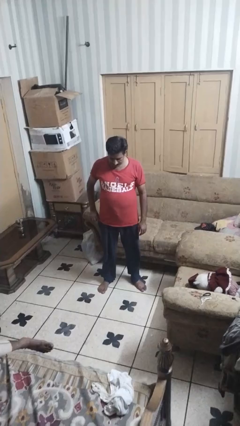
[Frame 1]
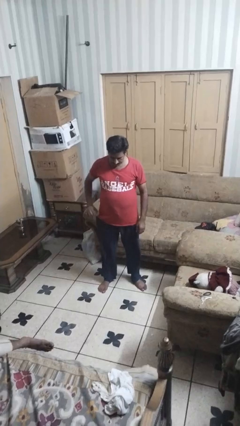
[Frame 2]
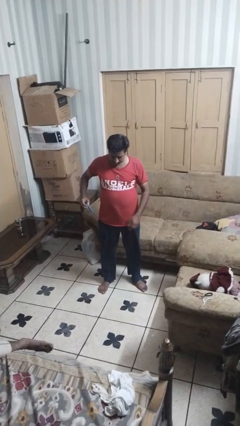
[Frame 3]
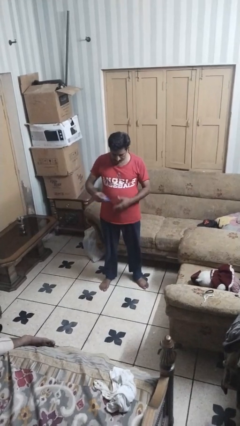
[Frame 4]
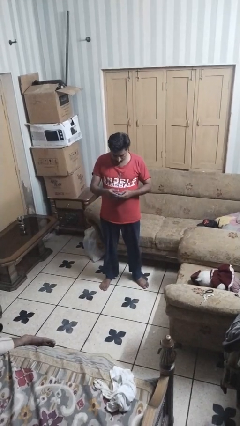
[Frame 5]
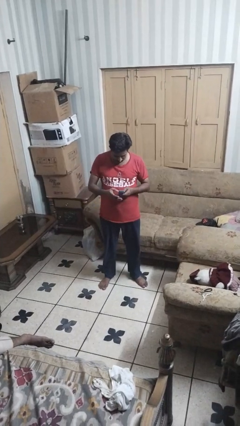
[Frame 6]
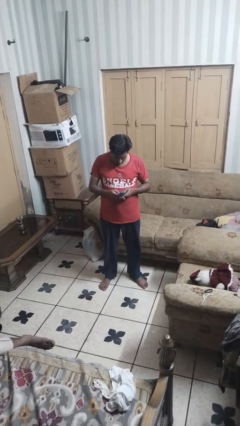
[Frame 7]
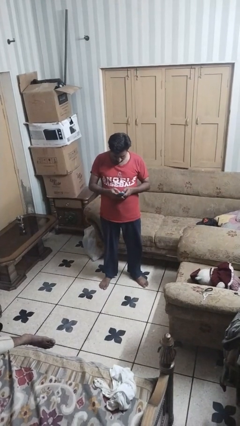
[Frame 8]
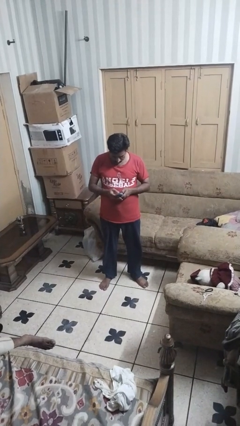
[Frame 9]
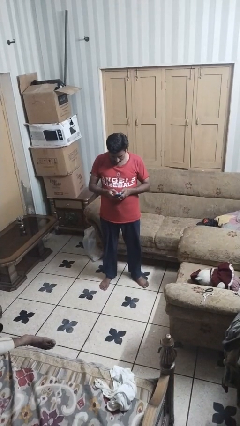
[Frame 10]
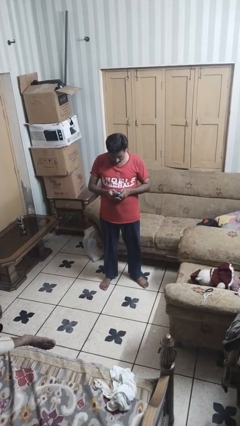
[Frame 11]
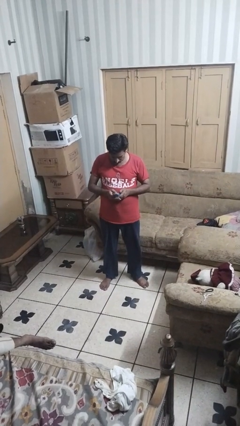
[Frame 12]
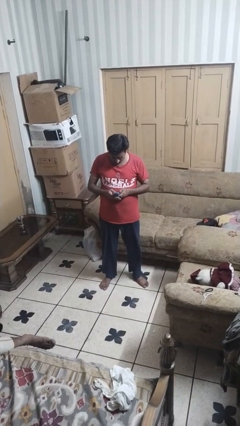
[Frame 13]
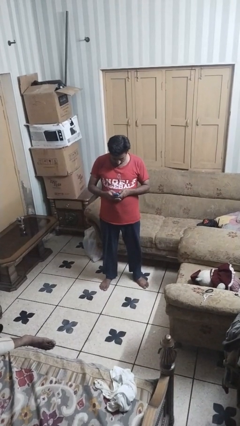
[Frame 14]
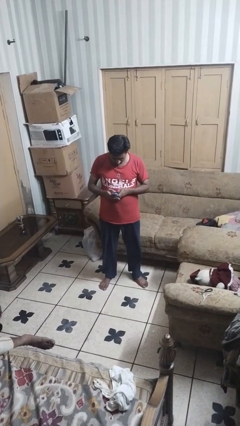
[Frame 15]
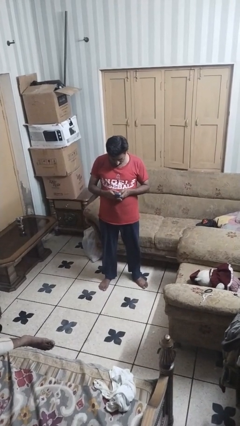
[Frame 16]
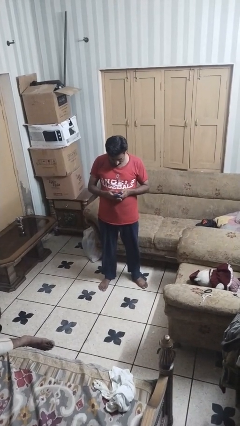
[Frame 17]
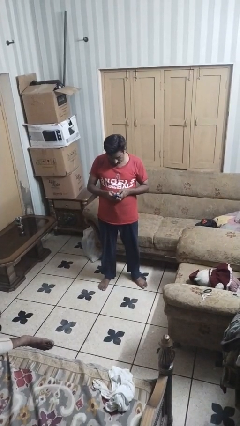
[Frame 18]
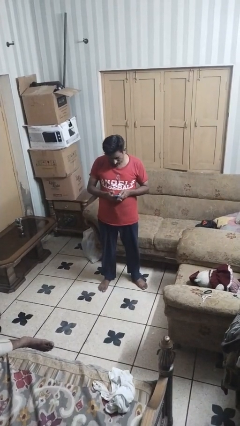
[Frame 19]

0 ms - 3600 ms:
person takes phone from pocket

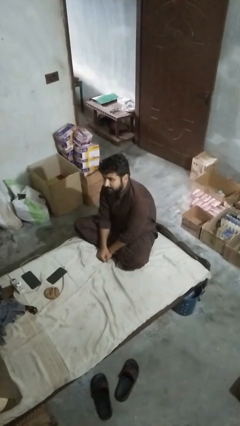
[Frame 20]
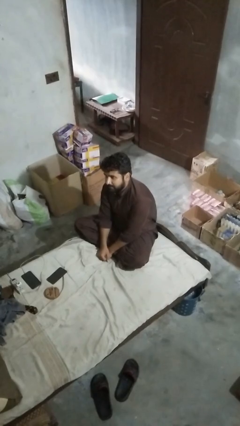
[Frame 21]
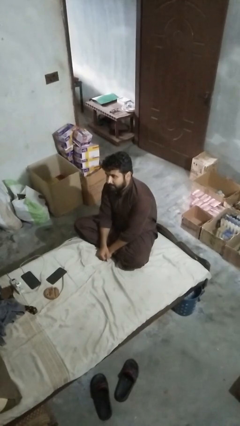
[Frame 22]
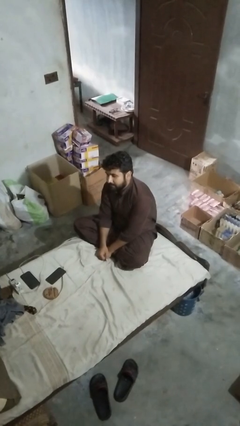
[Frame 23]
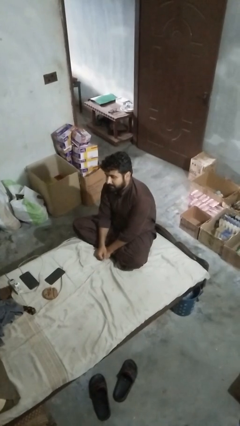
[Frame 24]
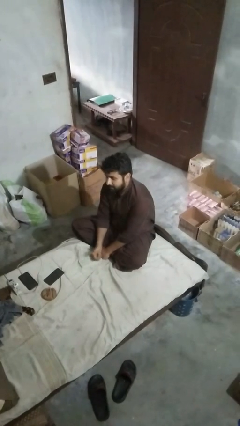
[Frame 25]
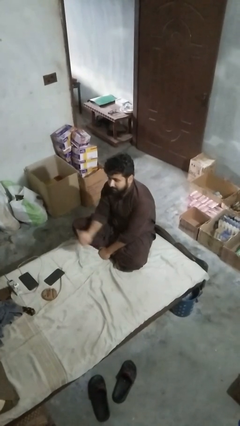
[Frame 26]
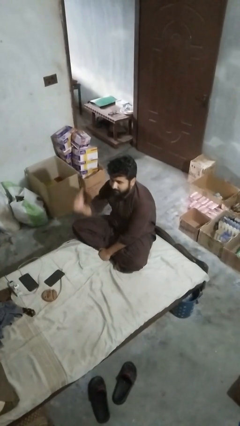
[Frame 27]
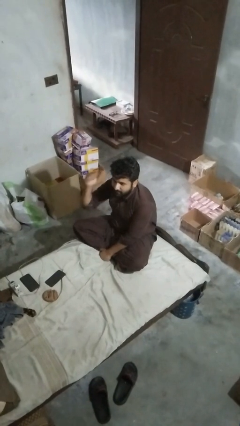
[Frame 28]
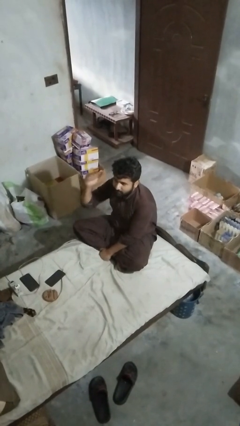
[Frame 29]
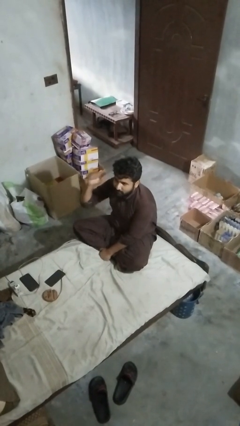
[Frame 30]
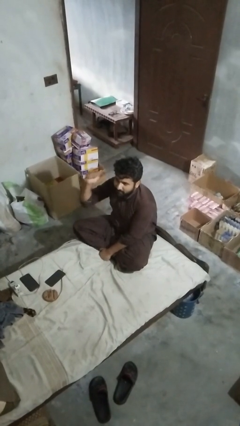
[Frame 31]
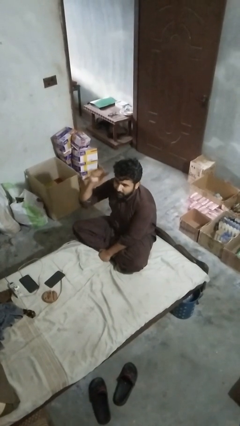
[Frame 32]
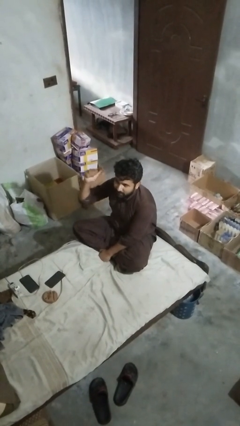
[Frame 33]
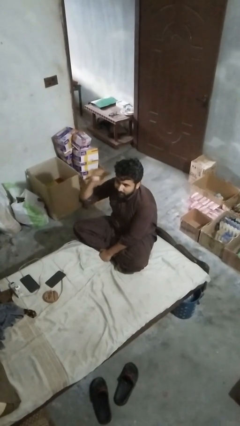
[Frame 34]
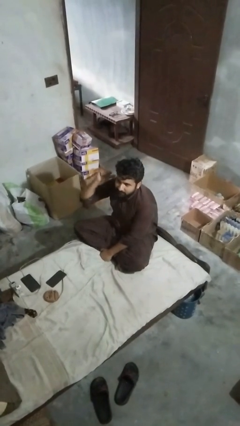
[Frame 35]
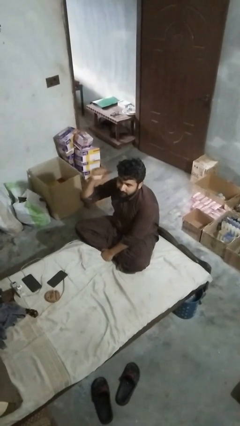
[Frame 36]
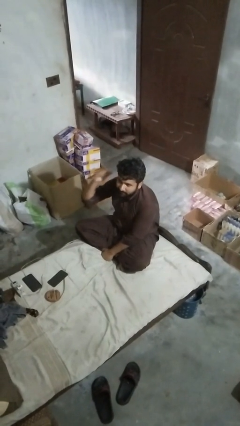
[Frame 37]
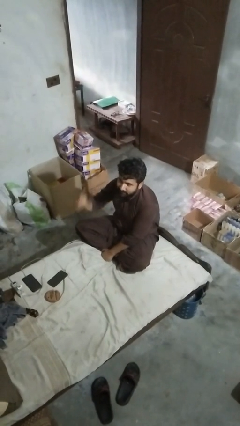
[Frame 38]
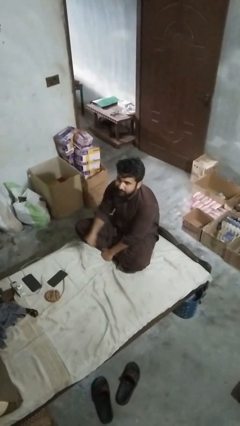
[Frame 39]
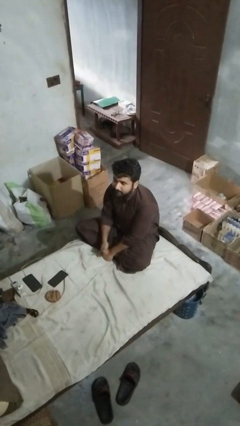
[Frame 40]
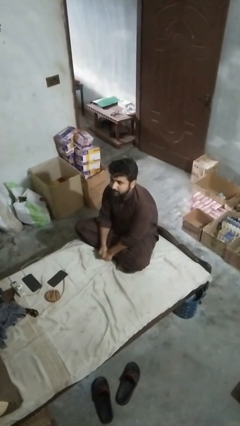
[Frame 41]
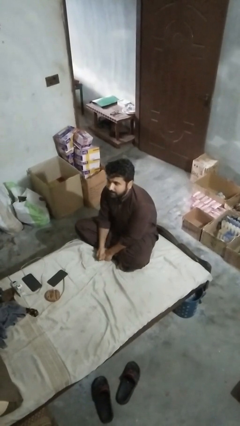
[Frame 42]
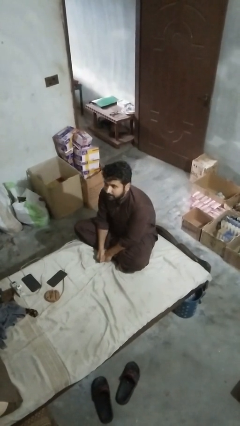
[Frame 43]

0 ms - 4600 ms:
person gestures behind me

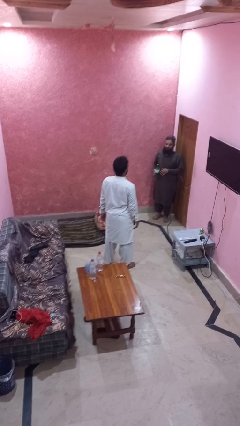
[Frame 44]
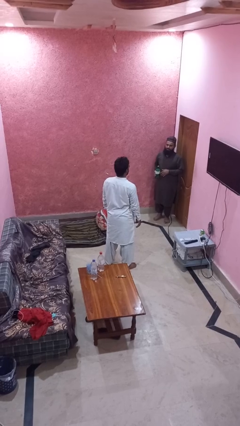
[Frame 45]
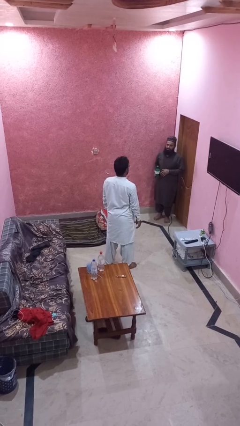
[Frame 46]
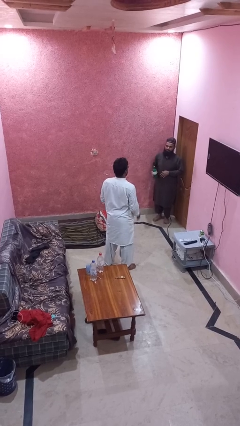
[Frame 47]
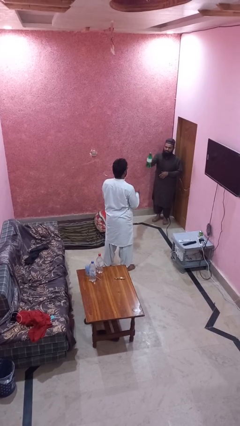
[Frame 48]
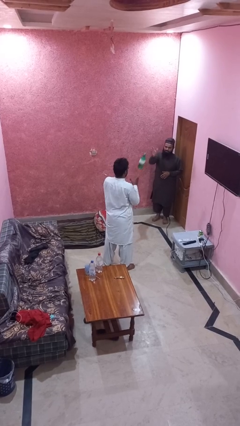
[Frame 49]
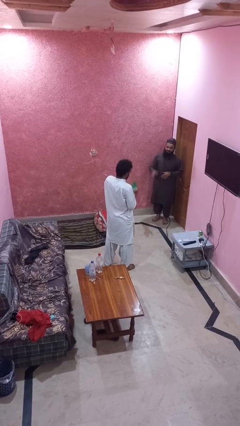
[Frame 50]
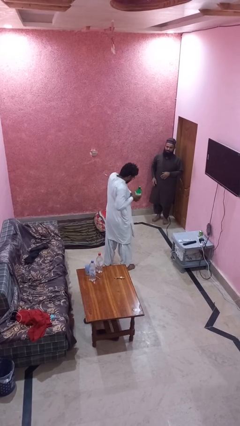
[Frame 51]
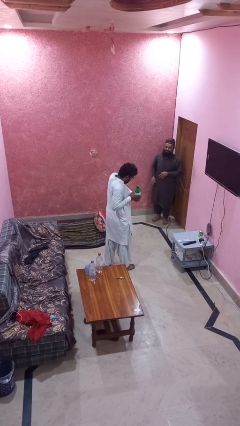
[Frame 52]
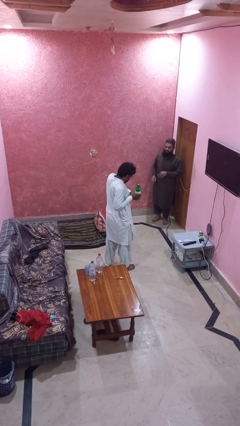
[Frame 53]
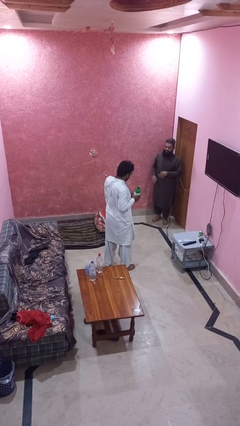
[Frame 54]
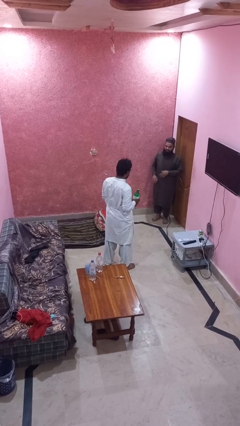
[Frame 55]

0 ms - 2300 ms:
person catches object from person

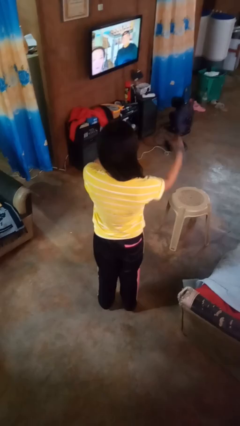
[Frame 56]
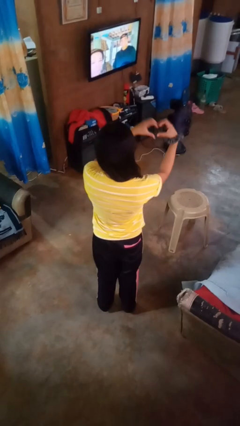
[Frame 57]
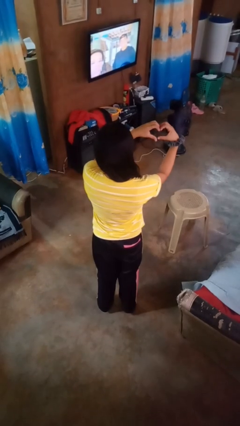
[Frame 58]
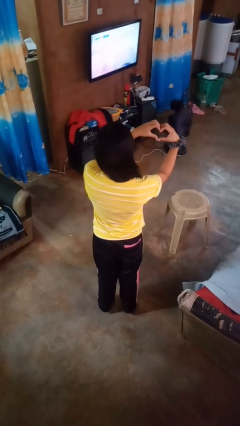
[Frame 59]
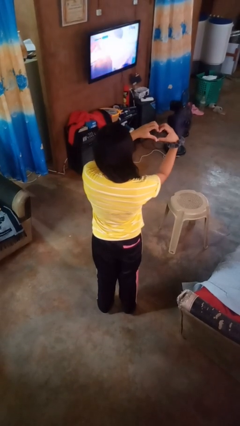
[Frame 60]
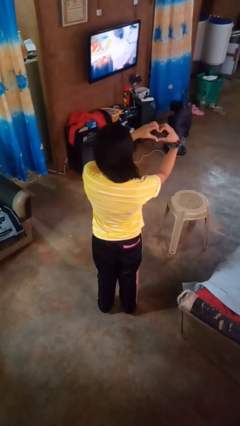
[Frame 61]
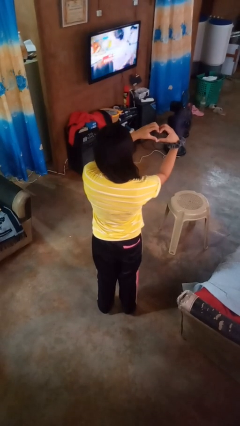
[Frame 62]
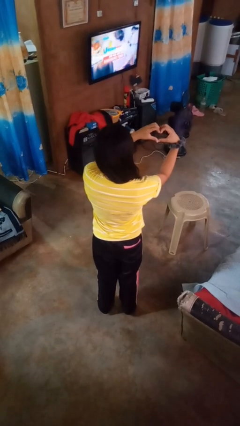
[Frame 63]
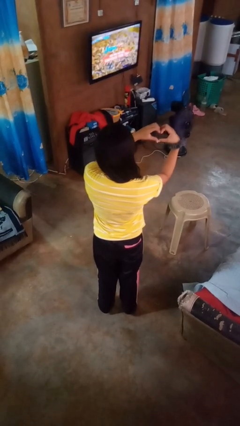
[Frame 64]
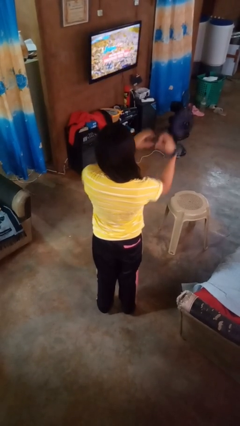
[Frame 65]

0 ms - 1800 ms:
person gestures heart

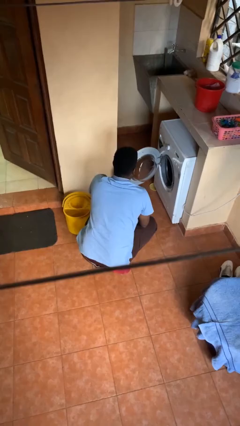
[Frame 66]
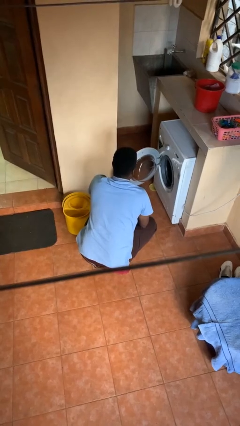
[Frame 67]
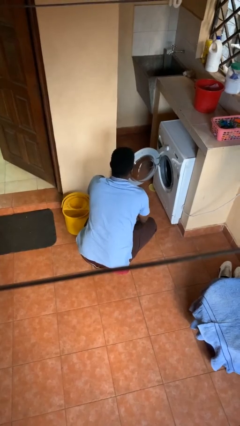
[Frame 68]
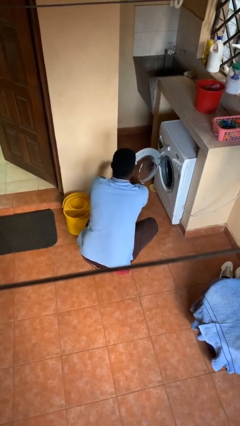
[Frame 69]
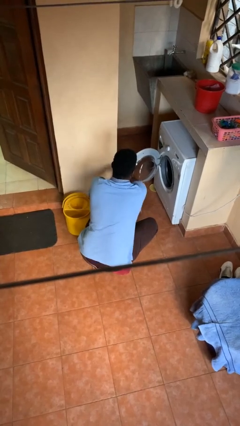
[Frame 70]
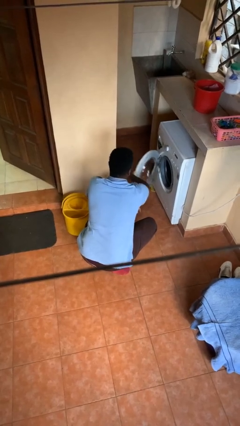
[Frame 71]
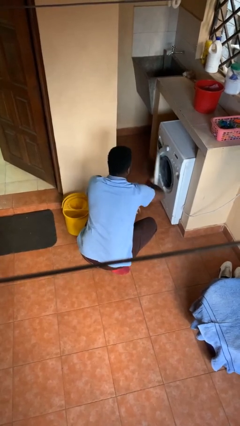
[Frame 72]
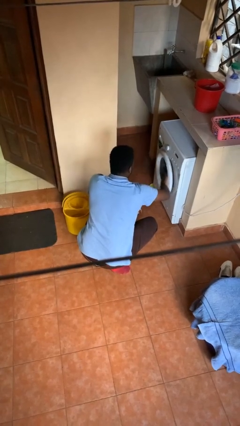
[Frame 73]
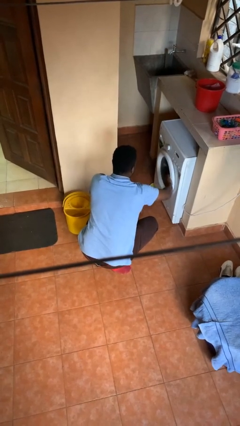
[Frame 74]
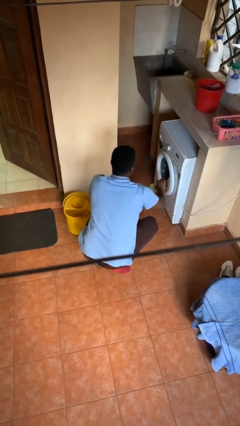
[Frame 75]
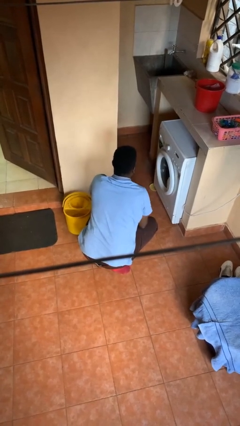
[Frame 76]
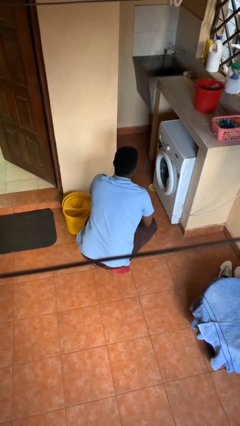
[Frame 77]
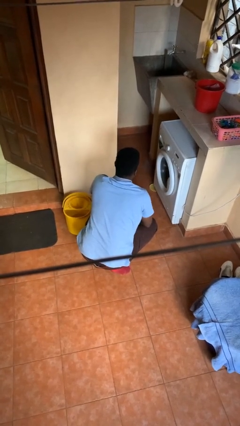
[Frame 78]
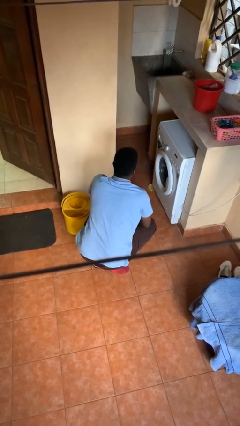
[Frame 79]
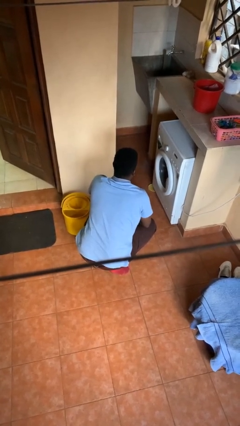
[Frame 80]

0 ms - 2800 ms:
person closes clothes washer

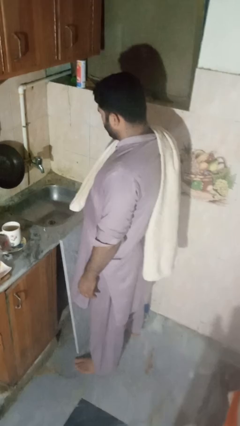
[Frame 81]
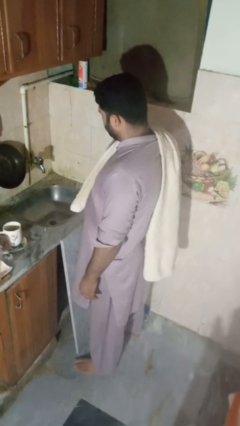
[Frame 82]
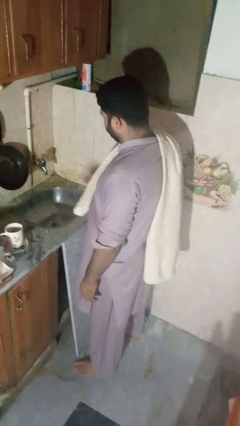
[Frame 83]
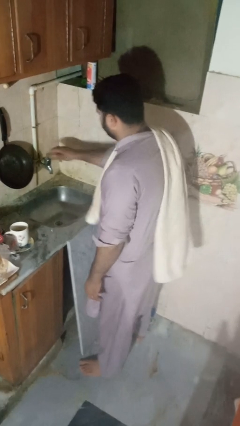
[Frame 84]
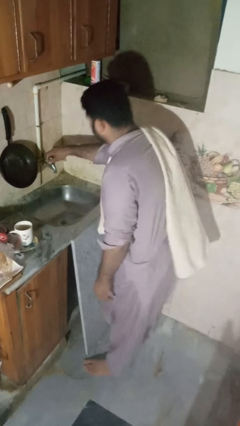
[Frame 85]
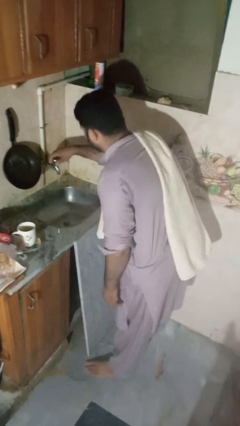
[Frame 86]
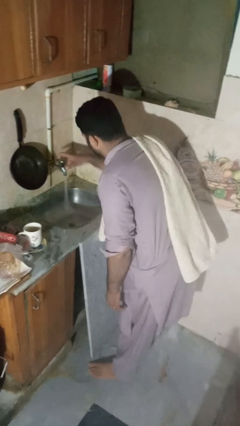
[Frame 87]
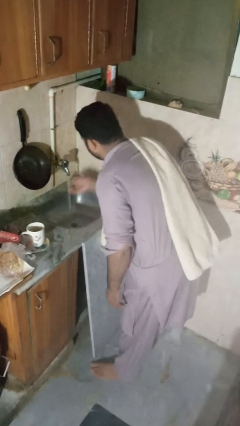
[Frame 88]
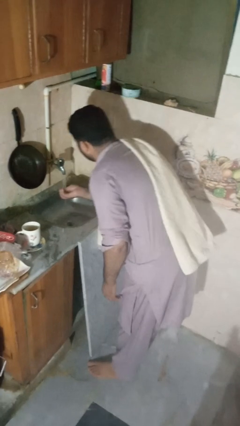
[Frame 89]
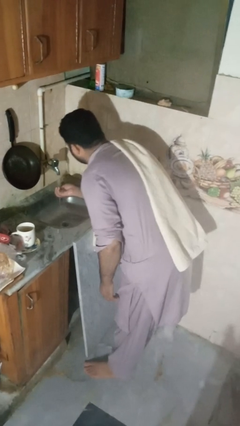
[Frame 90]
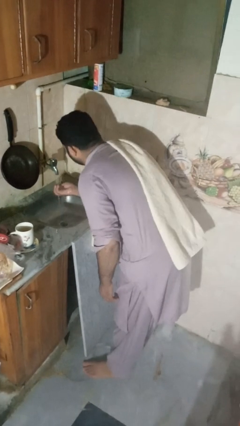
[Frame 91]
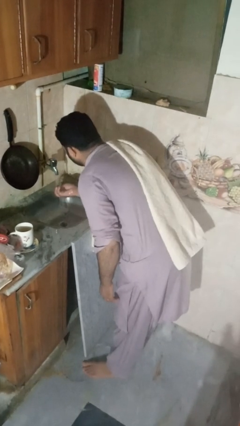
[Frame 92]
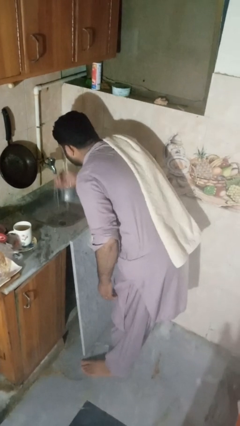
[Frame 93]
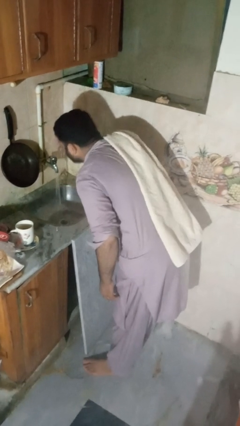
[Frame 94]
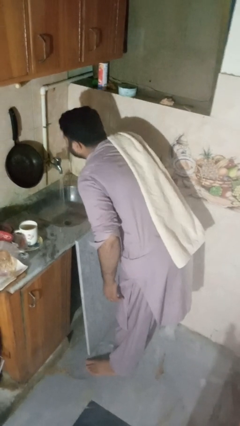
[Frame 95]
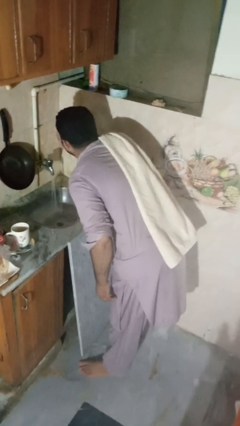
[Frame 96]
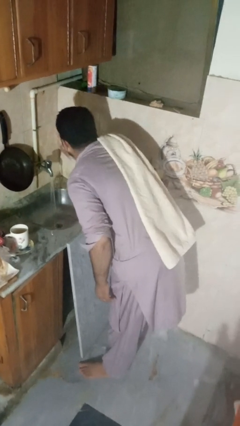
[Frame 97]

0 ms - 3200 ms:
person washes face
